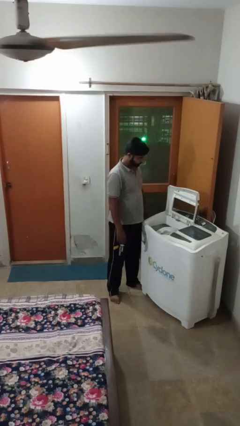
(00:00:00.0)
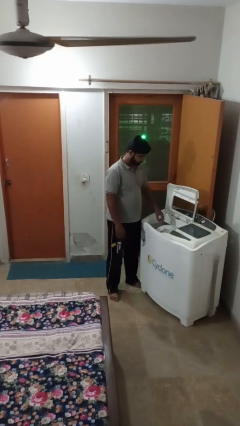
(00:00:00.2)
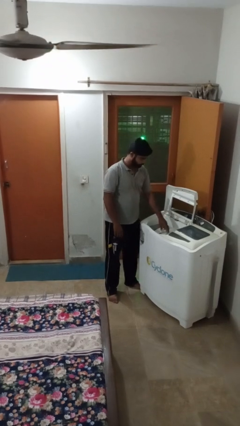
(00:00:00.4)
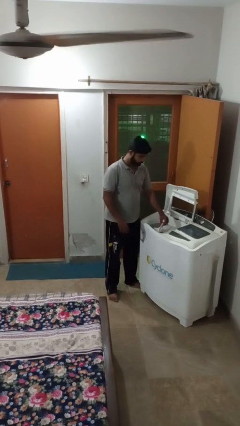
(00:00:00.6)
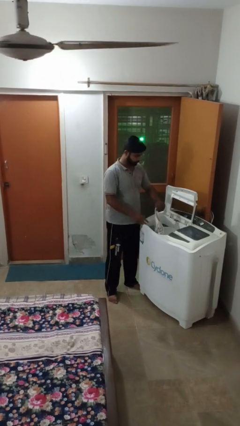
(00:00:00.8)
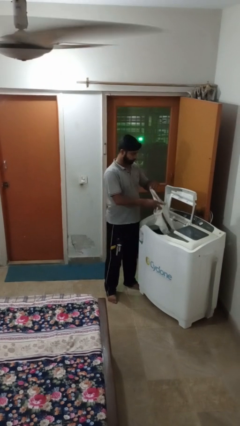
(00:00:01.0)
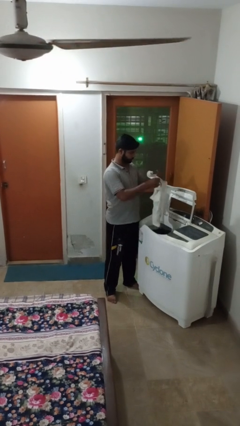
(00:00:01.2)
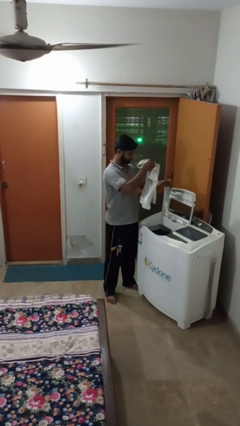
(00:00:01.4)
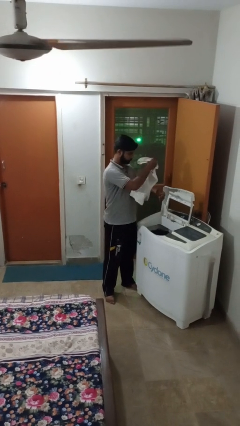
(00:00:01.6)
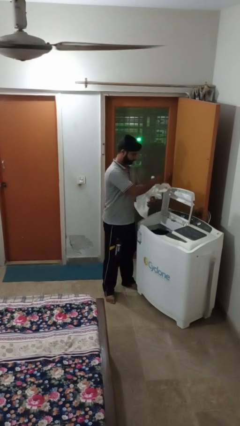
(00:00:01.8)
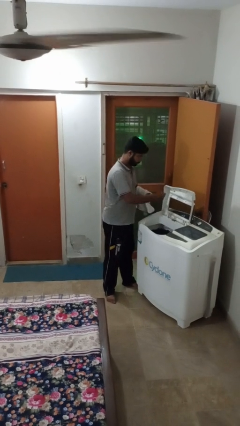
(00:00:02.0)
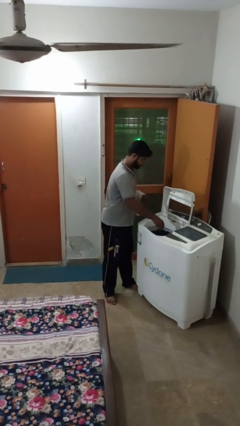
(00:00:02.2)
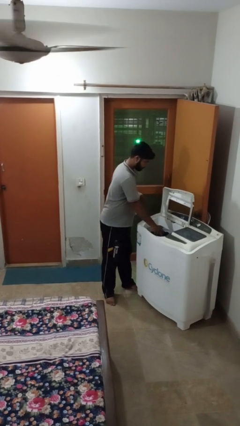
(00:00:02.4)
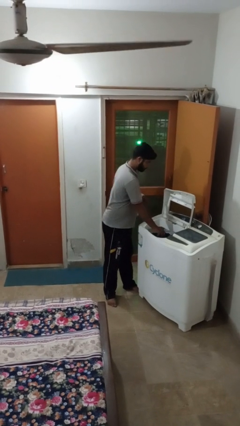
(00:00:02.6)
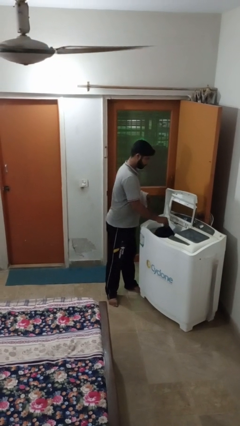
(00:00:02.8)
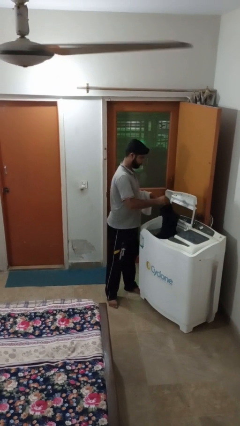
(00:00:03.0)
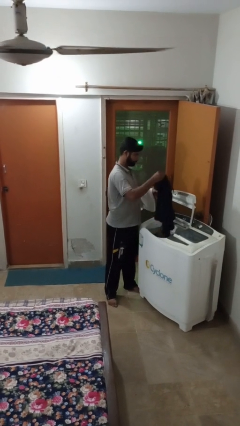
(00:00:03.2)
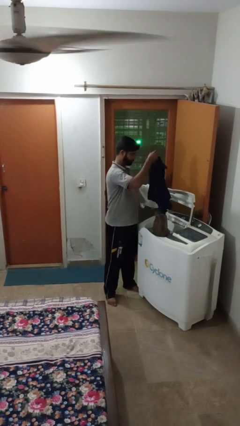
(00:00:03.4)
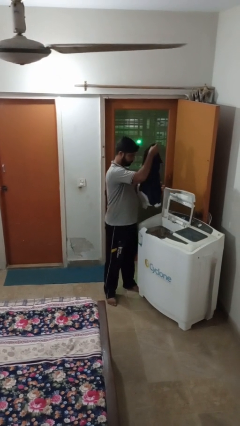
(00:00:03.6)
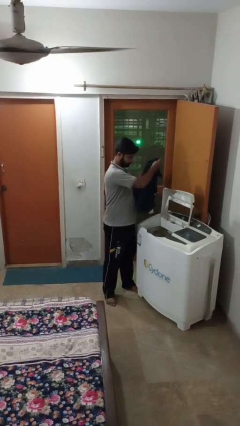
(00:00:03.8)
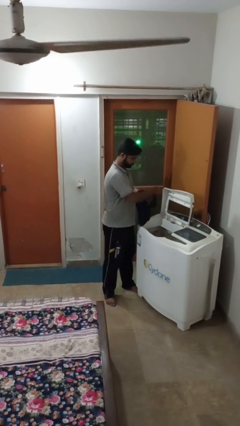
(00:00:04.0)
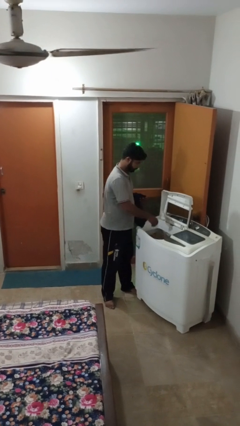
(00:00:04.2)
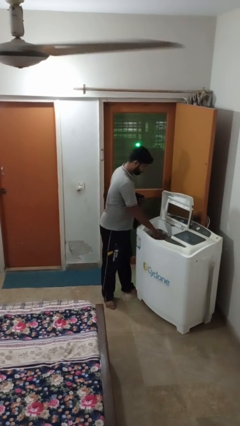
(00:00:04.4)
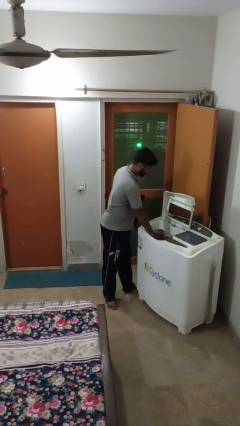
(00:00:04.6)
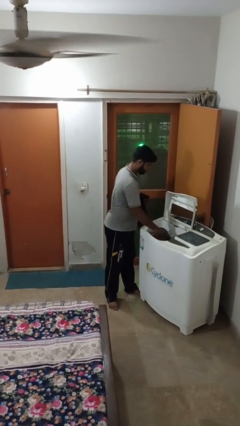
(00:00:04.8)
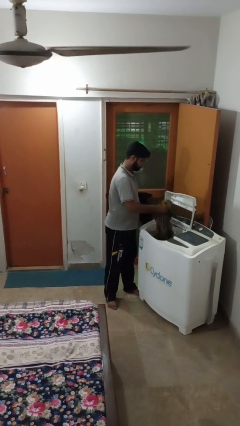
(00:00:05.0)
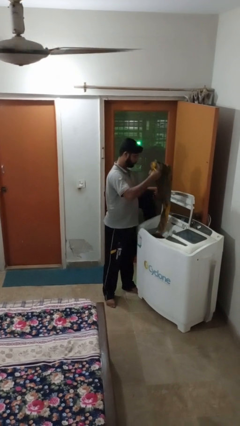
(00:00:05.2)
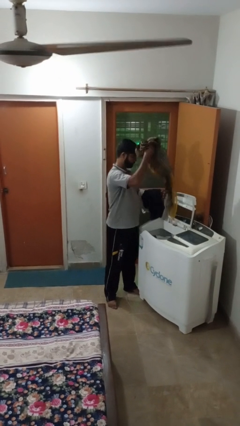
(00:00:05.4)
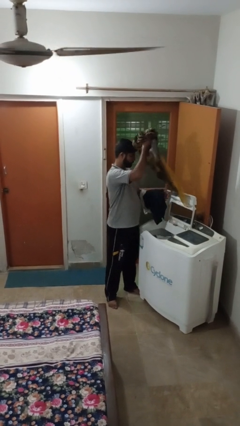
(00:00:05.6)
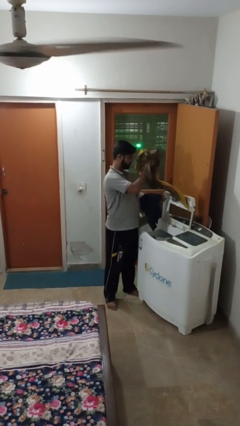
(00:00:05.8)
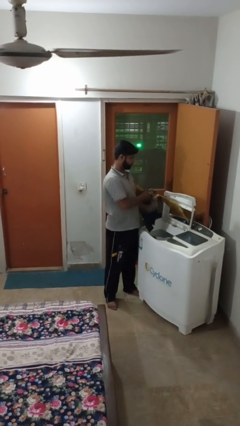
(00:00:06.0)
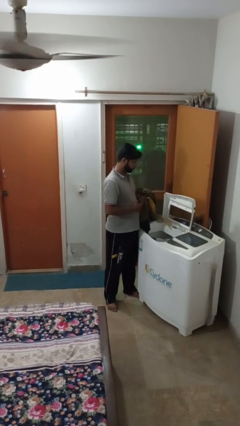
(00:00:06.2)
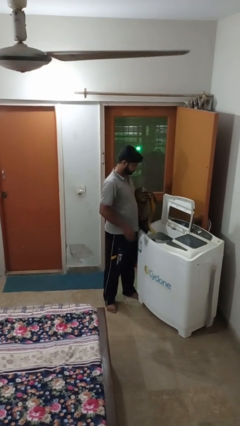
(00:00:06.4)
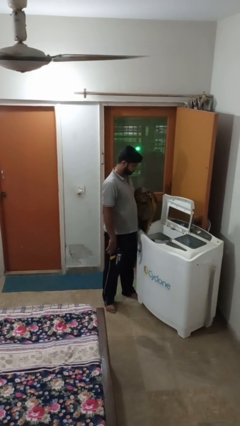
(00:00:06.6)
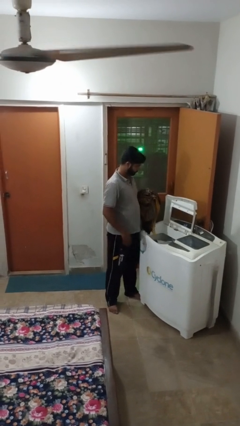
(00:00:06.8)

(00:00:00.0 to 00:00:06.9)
person unloads clotheswasher

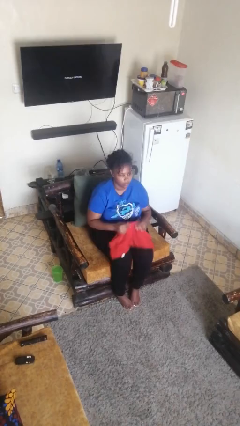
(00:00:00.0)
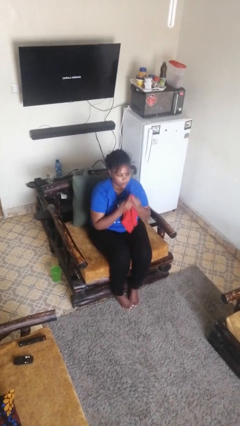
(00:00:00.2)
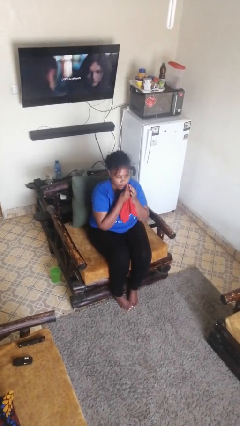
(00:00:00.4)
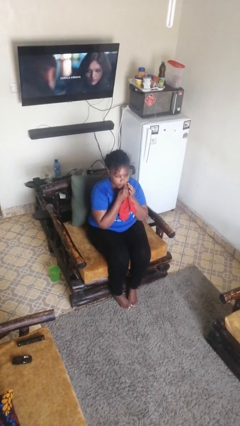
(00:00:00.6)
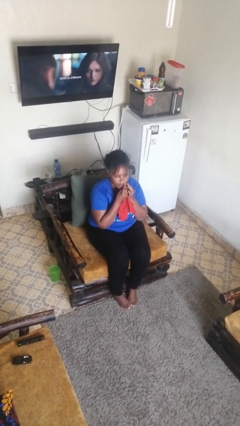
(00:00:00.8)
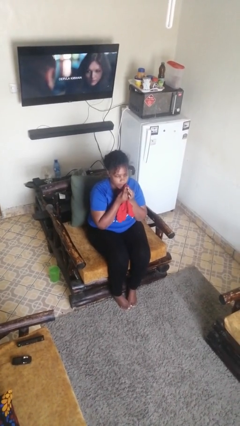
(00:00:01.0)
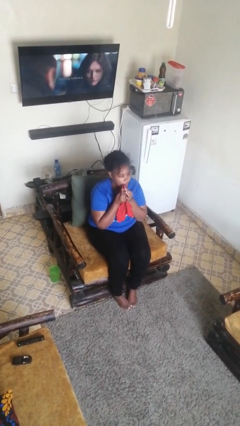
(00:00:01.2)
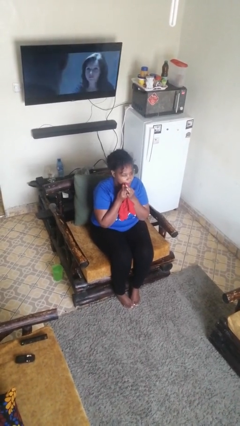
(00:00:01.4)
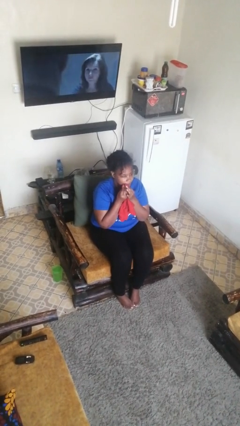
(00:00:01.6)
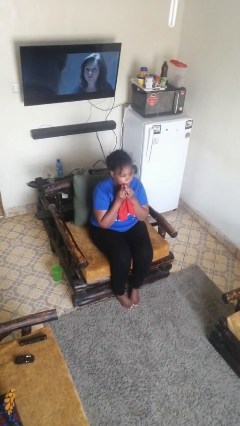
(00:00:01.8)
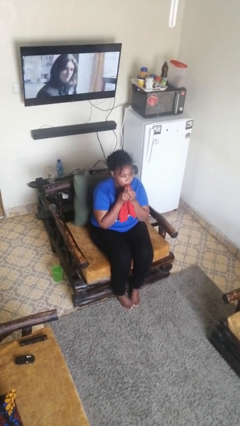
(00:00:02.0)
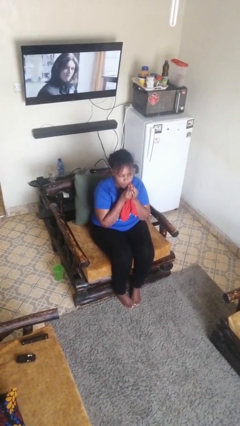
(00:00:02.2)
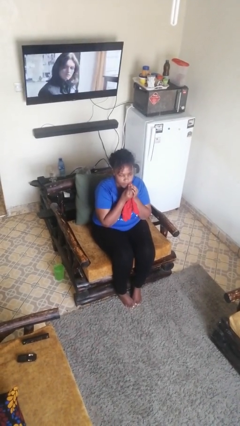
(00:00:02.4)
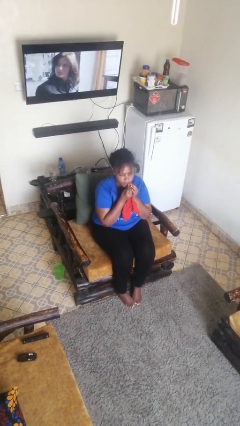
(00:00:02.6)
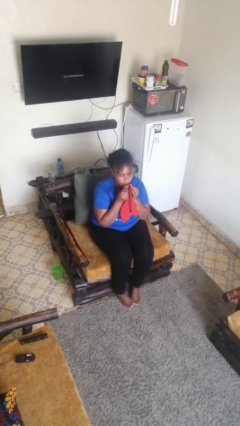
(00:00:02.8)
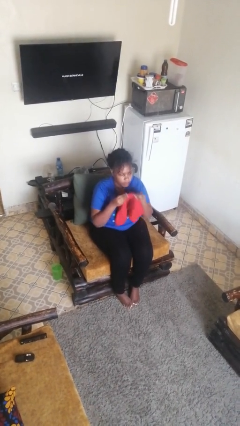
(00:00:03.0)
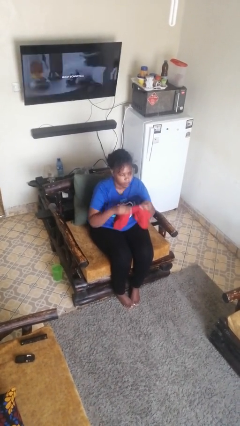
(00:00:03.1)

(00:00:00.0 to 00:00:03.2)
person wipes mouth with napkin

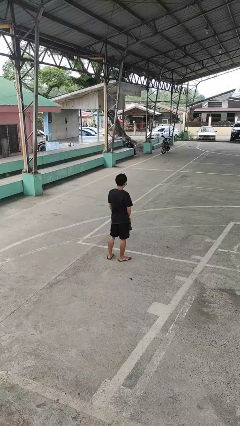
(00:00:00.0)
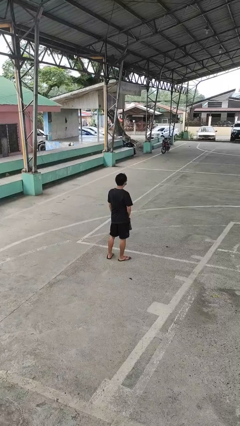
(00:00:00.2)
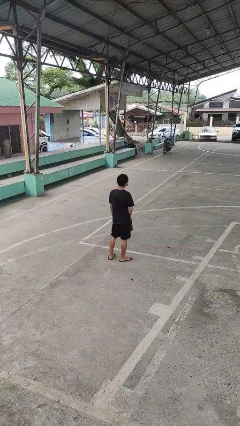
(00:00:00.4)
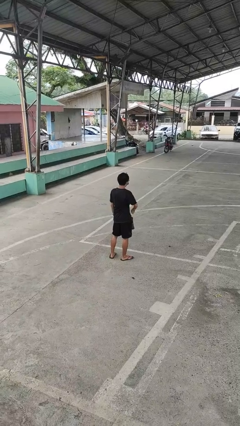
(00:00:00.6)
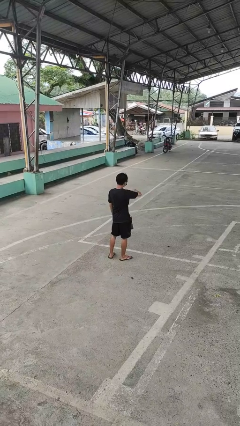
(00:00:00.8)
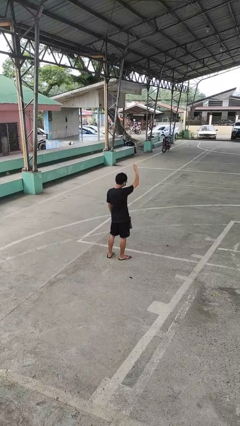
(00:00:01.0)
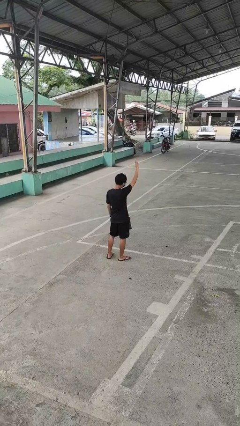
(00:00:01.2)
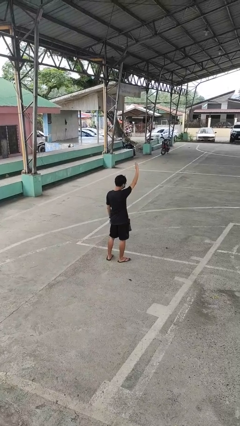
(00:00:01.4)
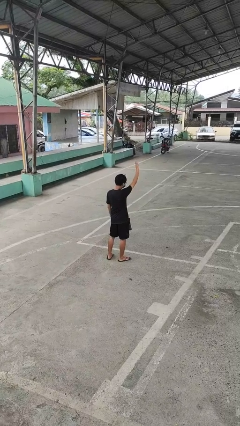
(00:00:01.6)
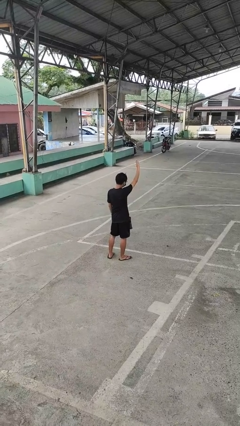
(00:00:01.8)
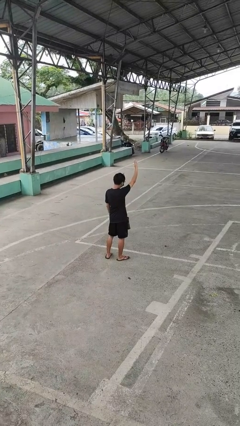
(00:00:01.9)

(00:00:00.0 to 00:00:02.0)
person gestures swipe up

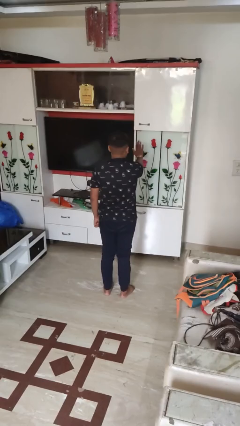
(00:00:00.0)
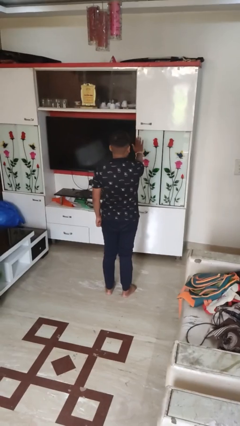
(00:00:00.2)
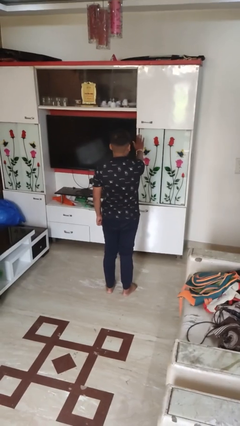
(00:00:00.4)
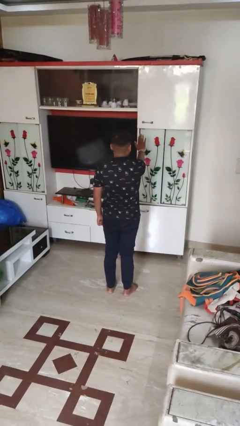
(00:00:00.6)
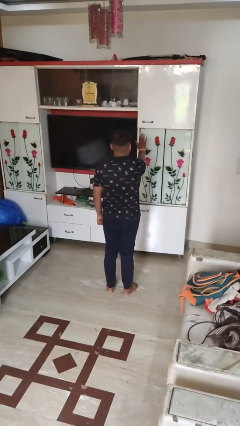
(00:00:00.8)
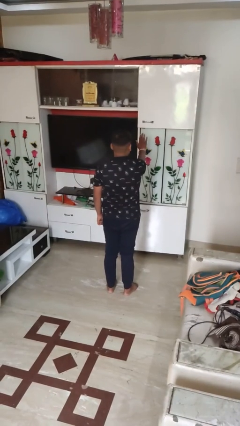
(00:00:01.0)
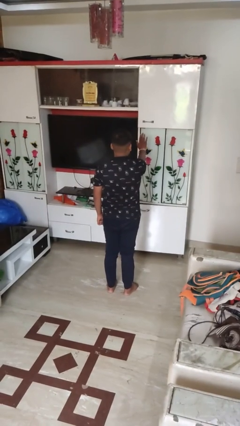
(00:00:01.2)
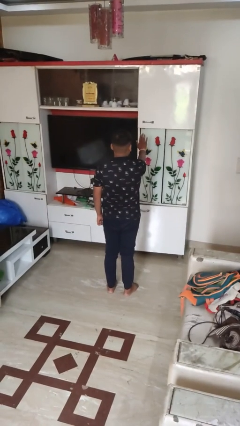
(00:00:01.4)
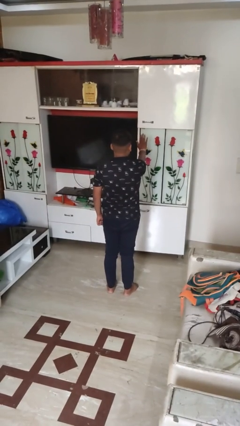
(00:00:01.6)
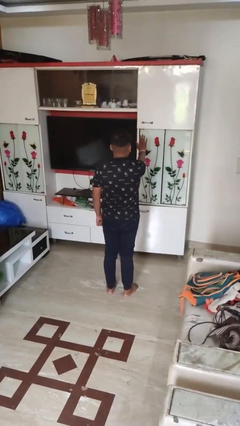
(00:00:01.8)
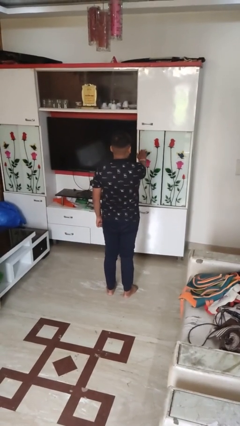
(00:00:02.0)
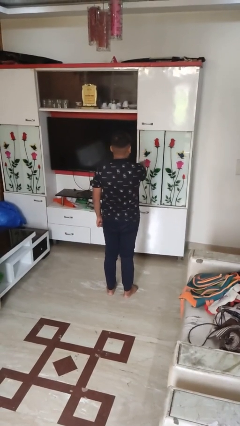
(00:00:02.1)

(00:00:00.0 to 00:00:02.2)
person gestures stop

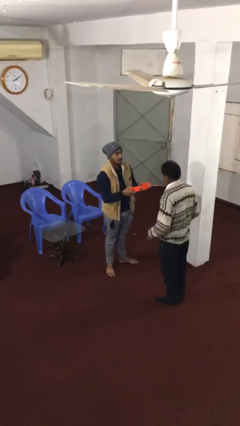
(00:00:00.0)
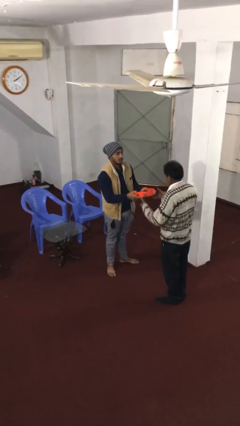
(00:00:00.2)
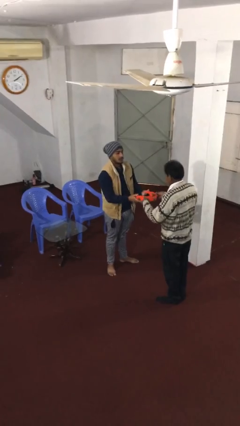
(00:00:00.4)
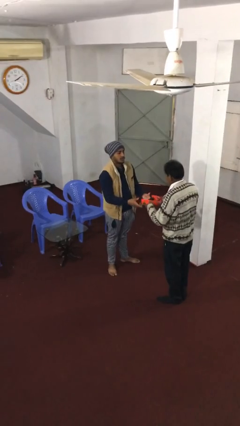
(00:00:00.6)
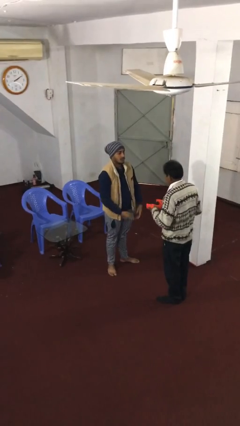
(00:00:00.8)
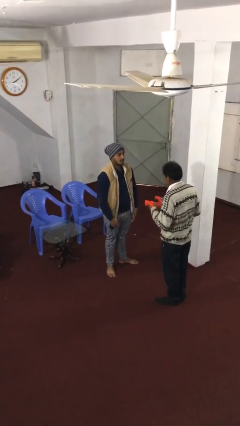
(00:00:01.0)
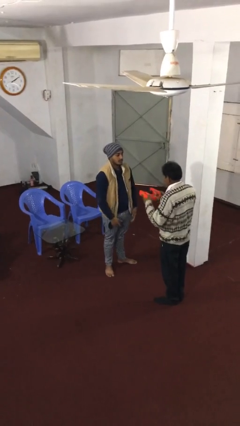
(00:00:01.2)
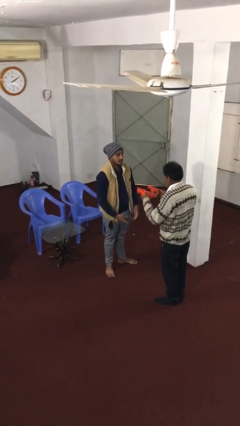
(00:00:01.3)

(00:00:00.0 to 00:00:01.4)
person transfers object to person

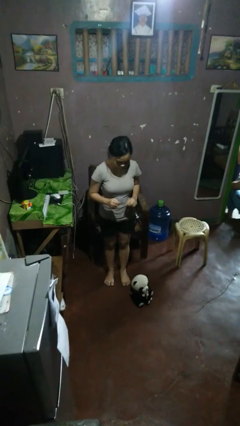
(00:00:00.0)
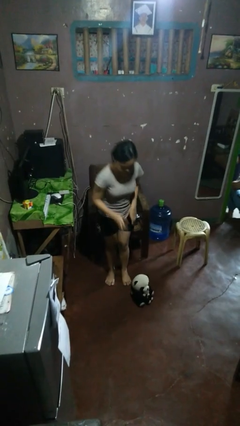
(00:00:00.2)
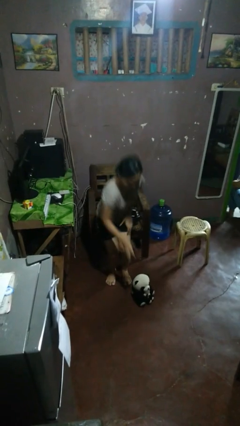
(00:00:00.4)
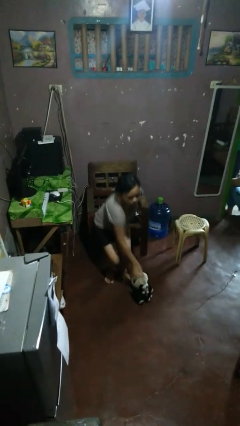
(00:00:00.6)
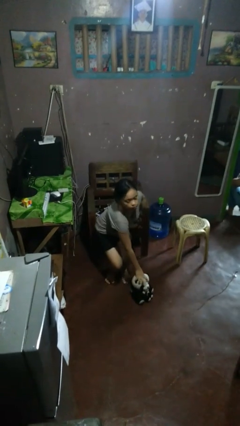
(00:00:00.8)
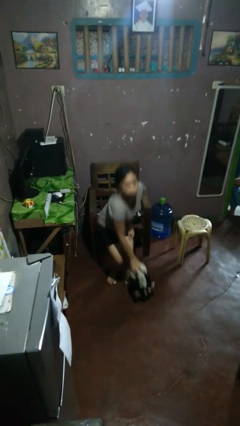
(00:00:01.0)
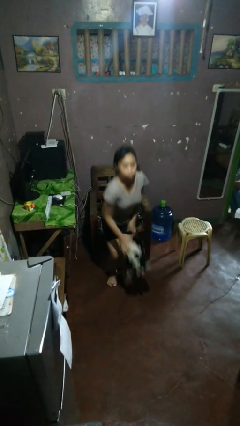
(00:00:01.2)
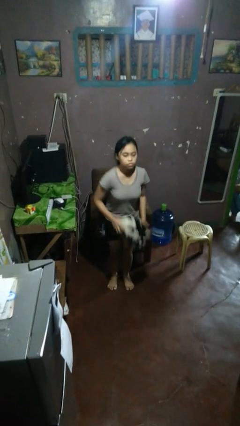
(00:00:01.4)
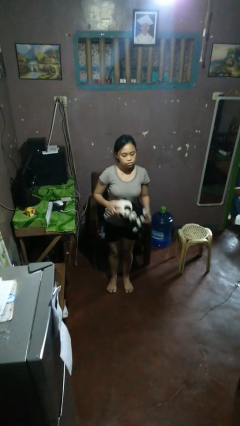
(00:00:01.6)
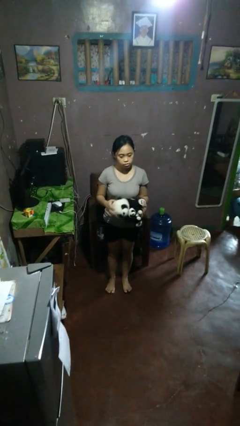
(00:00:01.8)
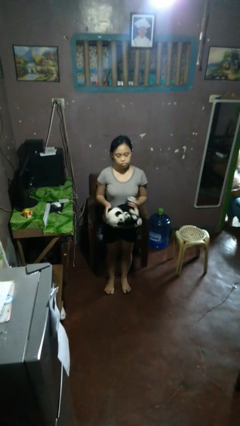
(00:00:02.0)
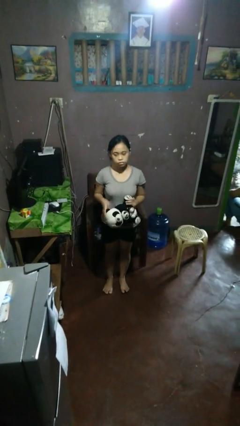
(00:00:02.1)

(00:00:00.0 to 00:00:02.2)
person picks up object from floor
